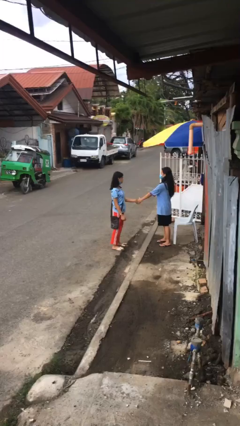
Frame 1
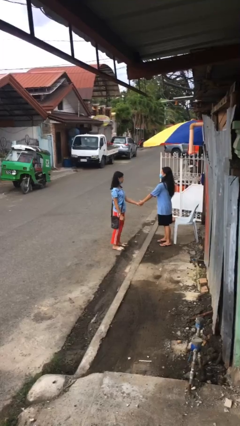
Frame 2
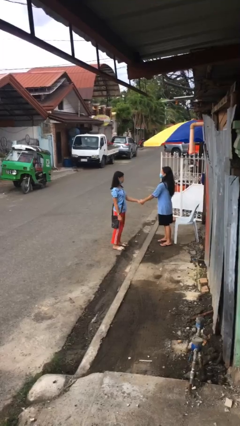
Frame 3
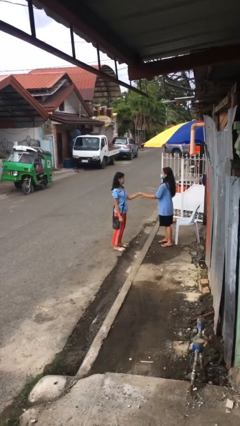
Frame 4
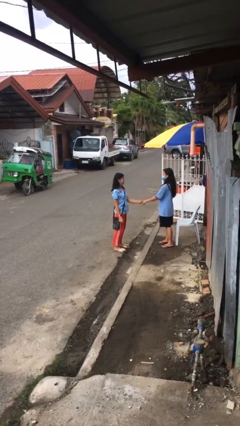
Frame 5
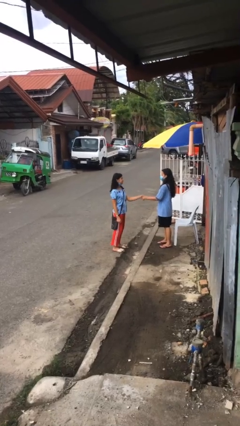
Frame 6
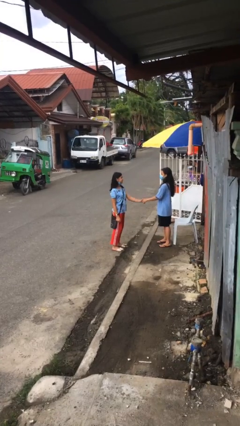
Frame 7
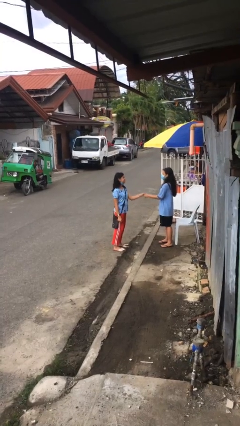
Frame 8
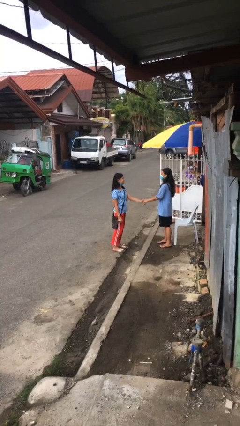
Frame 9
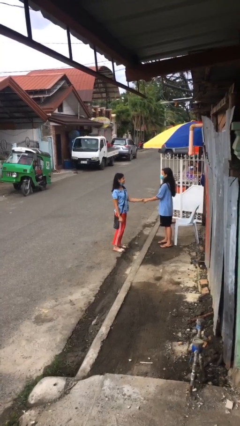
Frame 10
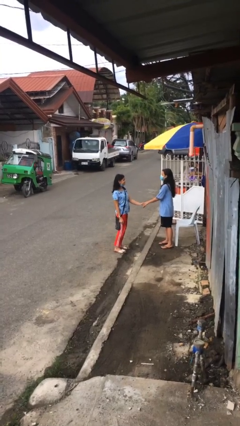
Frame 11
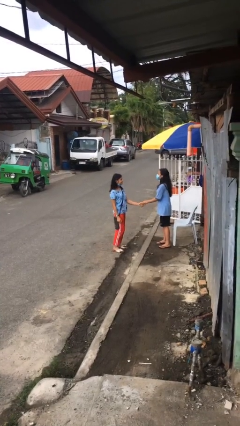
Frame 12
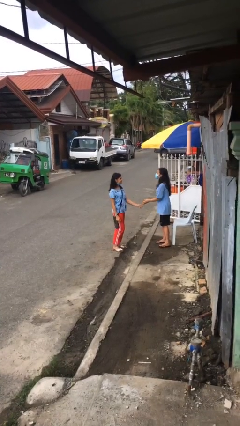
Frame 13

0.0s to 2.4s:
person shakes hand

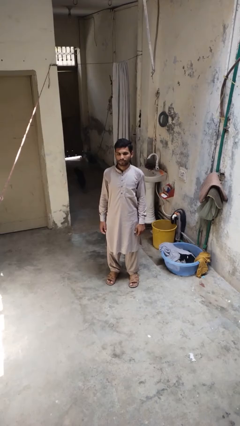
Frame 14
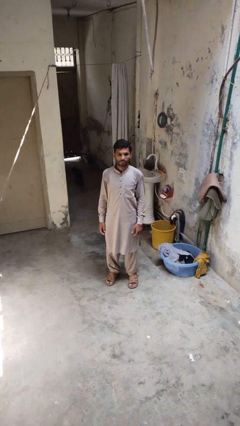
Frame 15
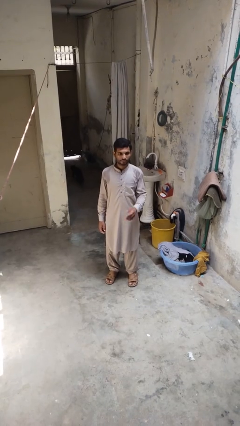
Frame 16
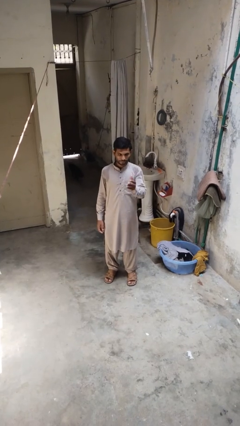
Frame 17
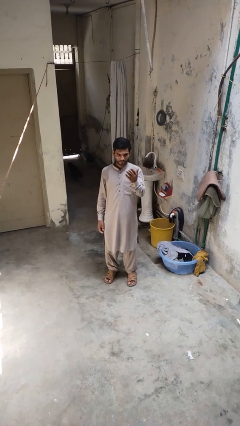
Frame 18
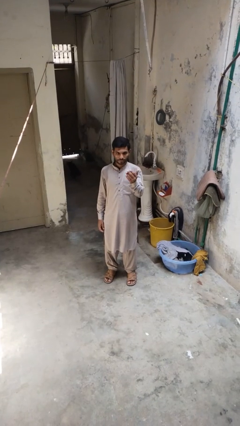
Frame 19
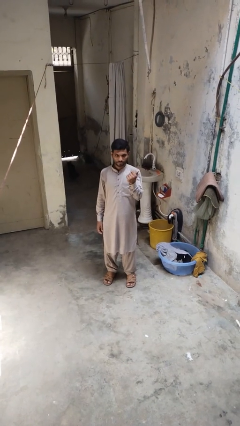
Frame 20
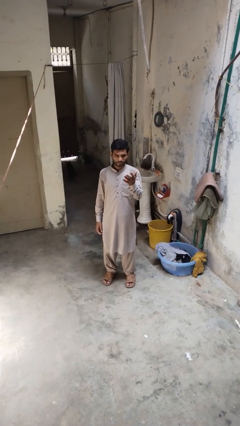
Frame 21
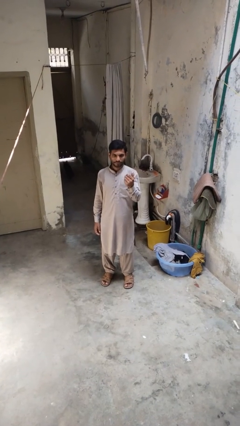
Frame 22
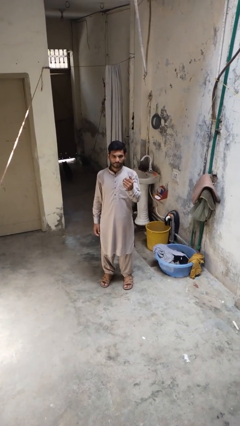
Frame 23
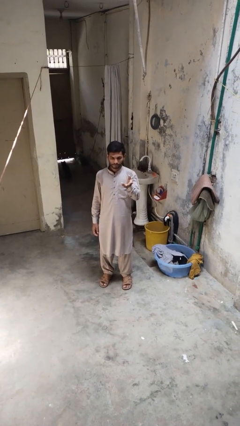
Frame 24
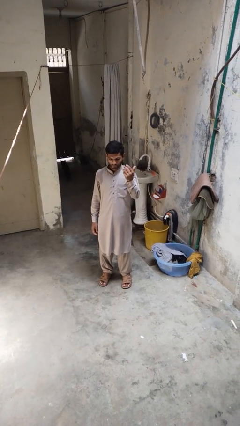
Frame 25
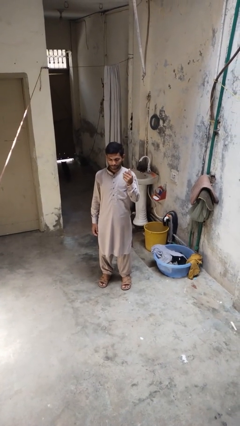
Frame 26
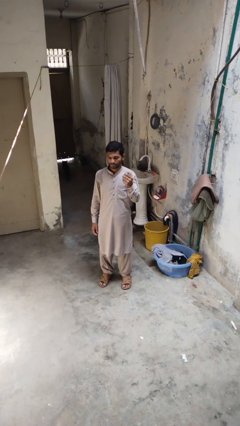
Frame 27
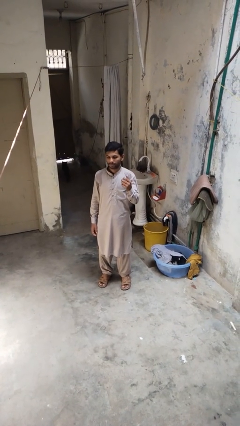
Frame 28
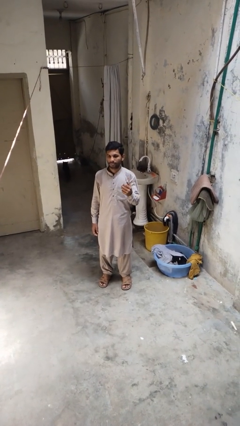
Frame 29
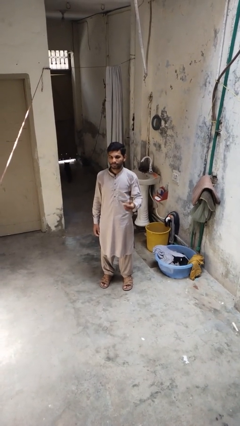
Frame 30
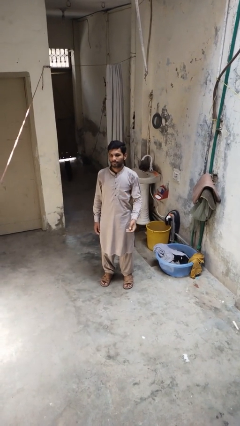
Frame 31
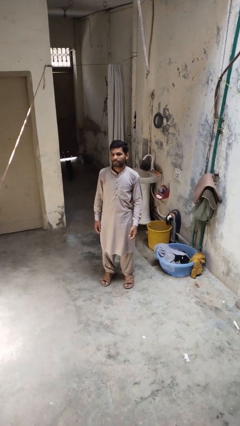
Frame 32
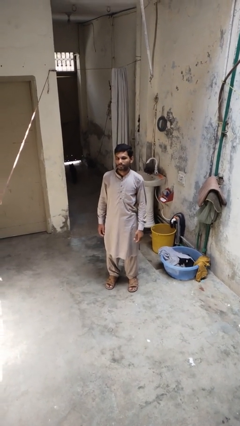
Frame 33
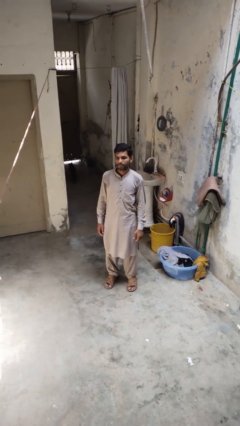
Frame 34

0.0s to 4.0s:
person gestures come here

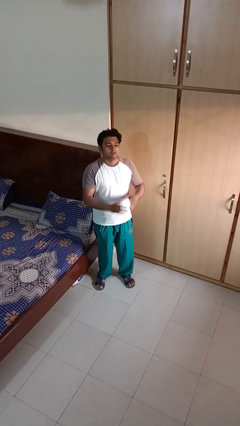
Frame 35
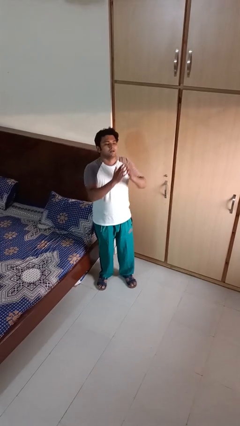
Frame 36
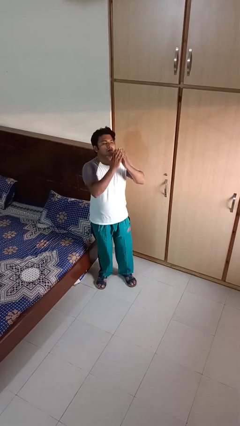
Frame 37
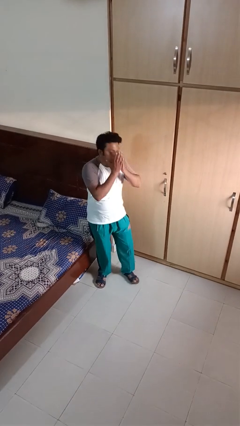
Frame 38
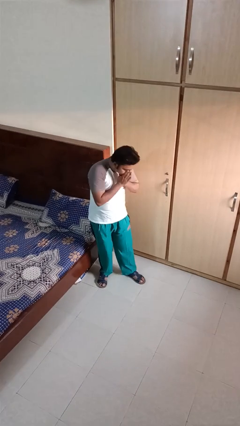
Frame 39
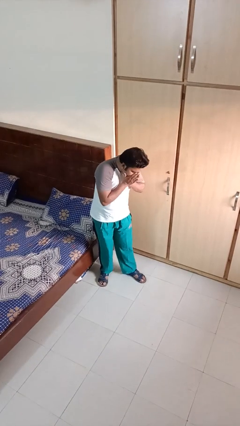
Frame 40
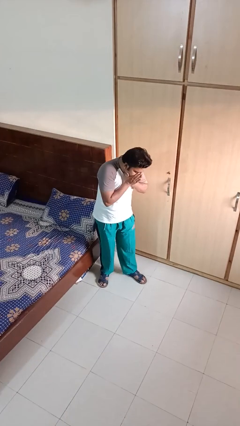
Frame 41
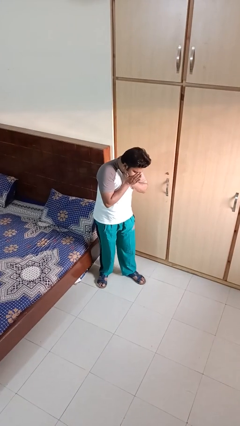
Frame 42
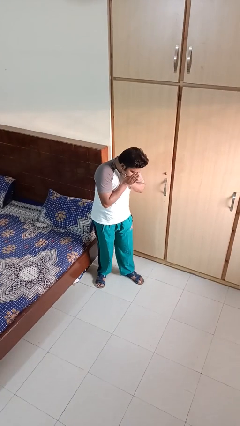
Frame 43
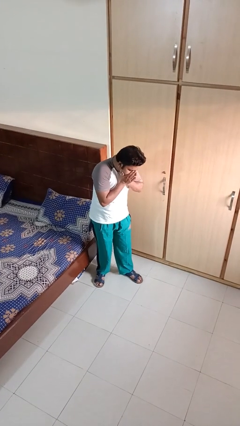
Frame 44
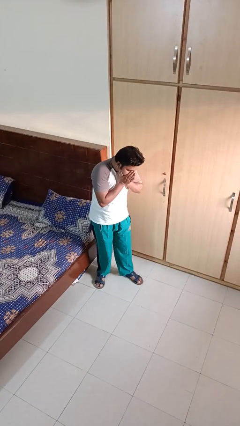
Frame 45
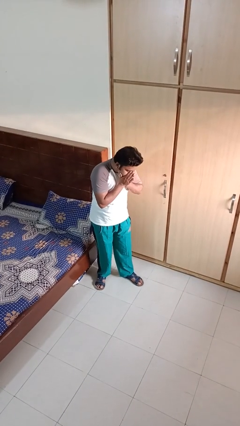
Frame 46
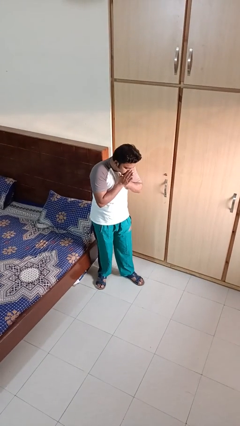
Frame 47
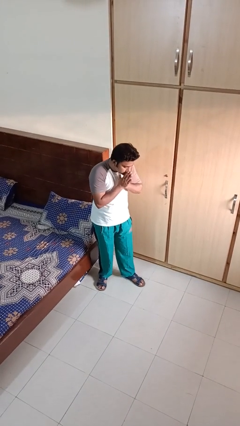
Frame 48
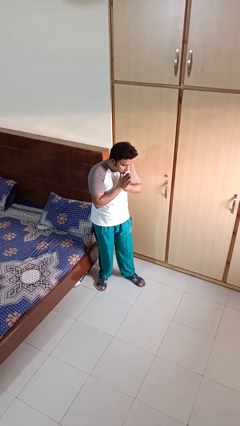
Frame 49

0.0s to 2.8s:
person sneezes into hand

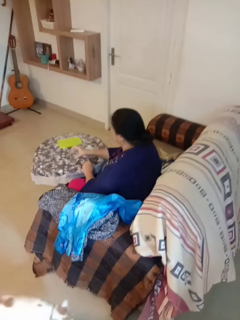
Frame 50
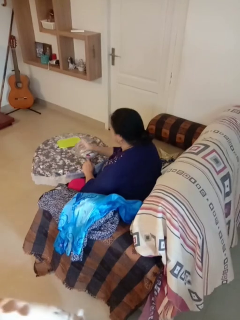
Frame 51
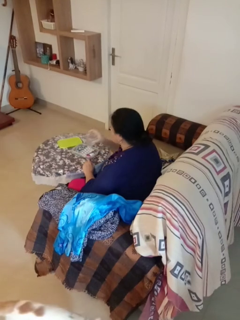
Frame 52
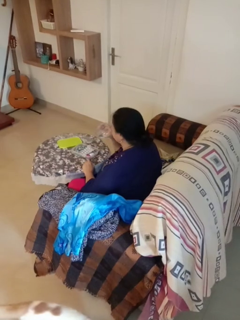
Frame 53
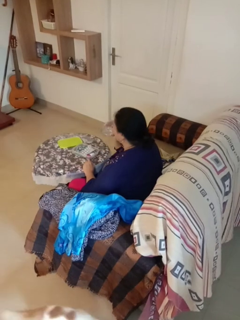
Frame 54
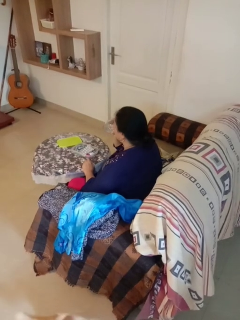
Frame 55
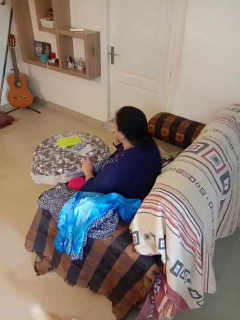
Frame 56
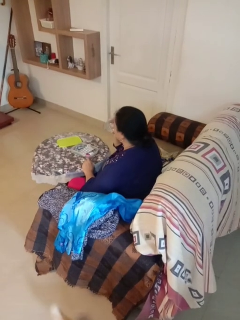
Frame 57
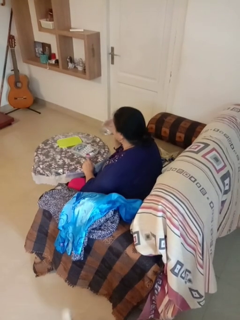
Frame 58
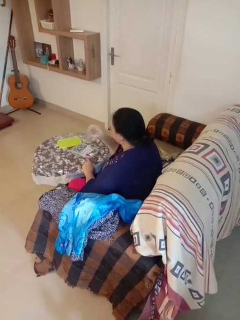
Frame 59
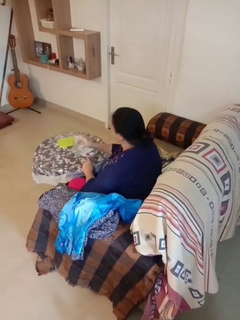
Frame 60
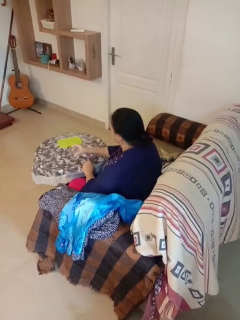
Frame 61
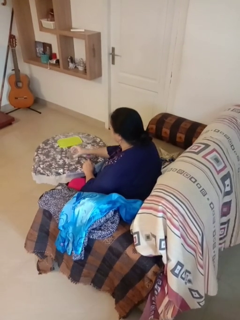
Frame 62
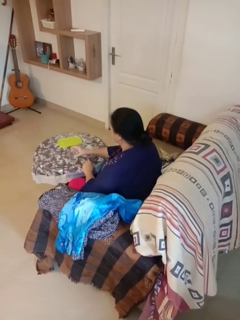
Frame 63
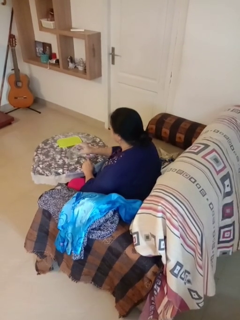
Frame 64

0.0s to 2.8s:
person drinks from cup
